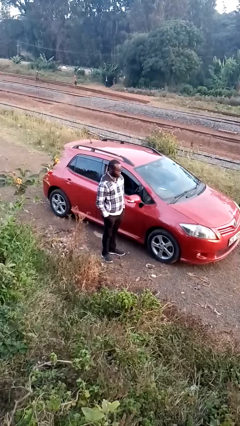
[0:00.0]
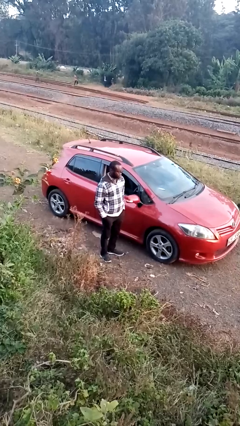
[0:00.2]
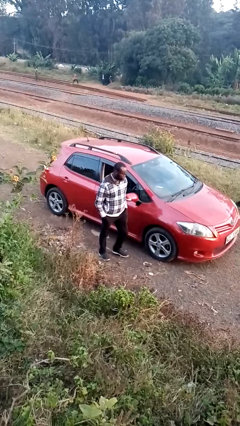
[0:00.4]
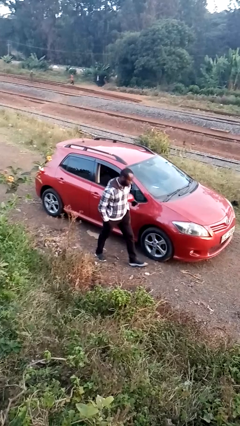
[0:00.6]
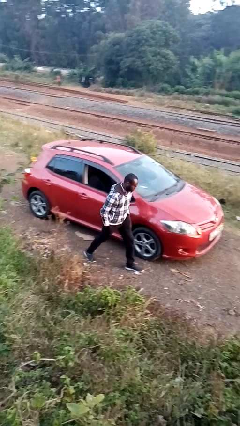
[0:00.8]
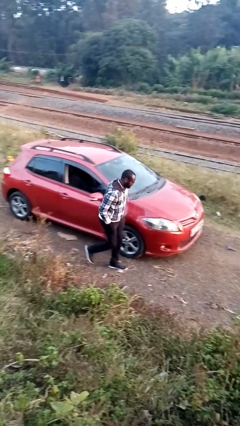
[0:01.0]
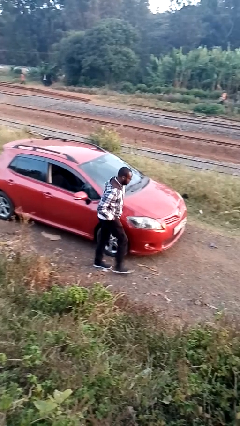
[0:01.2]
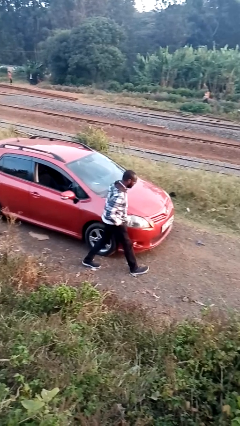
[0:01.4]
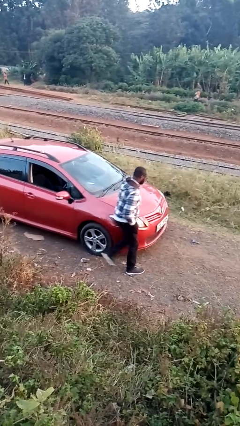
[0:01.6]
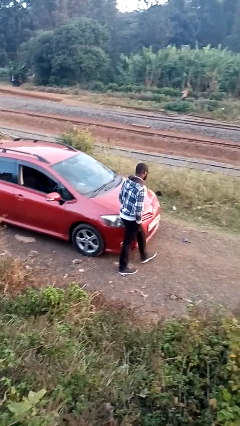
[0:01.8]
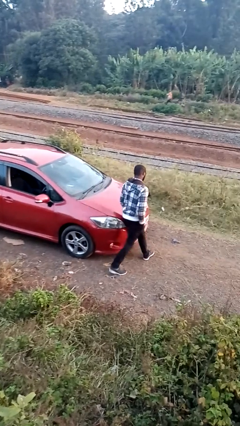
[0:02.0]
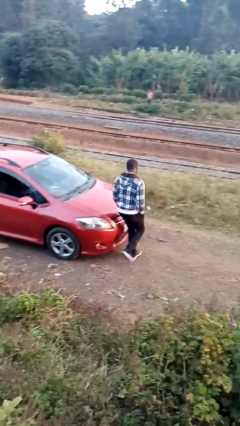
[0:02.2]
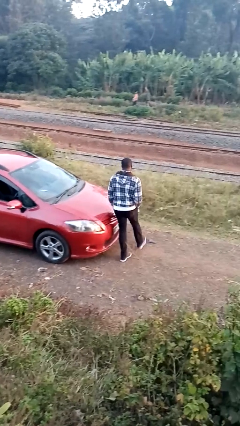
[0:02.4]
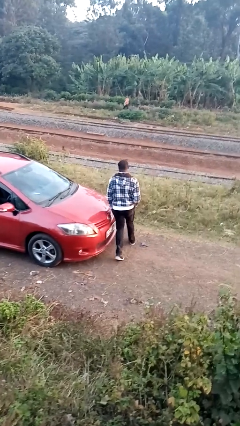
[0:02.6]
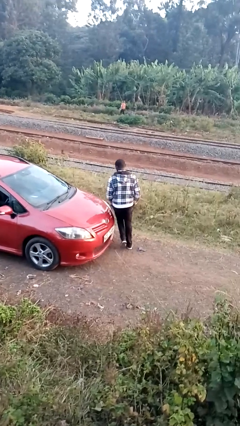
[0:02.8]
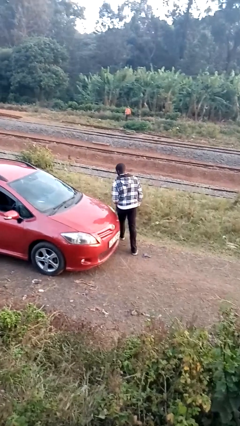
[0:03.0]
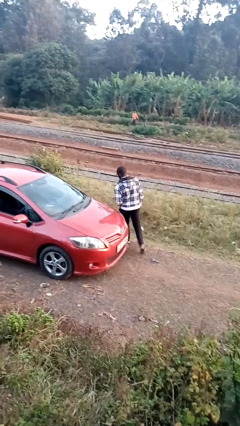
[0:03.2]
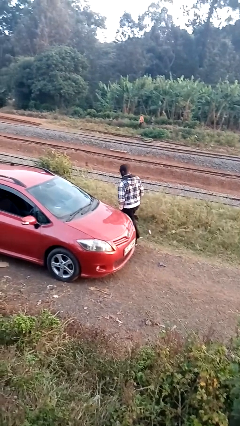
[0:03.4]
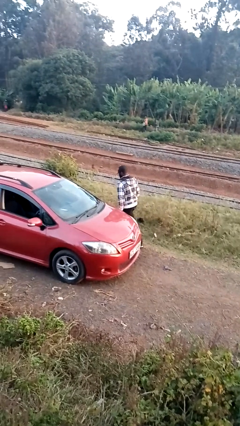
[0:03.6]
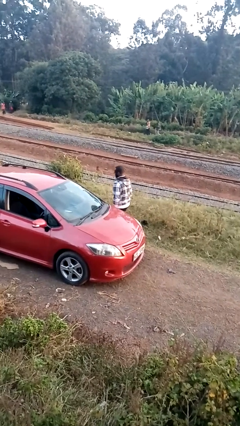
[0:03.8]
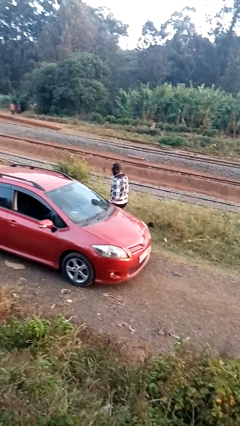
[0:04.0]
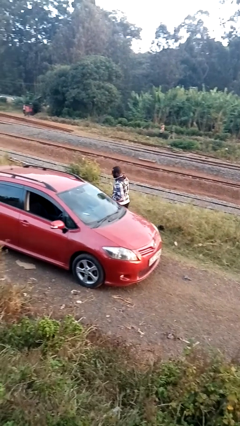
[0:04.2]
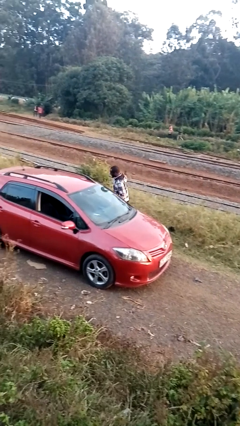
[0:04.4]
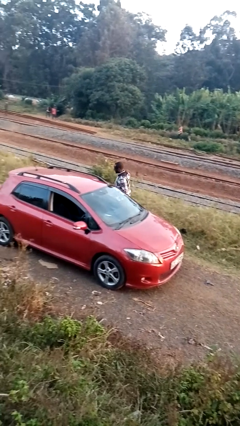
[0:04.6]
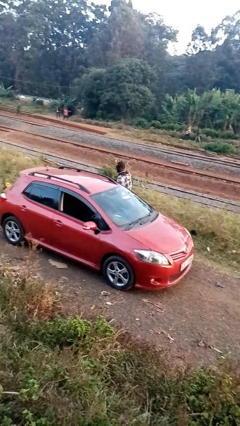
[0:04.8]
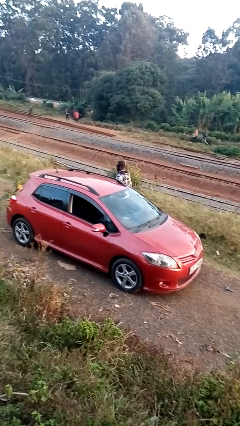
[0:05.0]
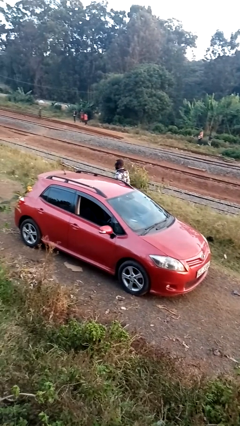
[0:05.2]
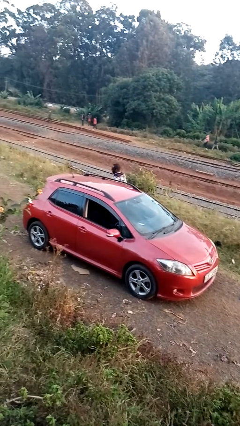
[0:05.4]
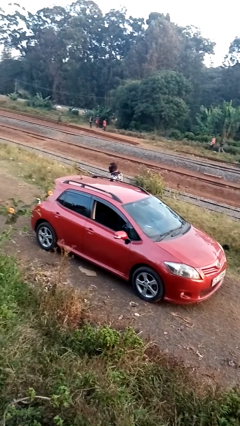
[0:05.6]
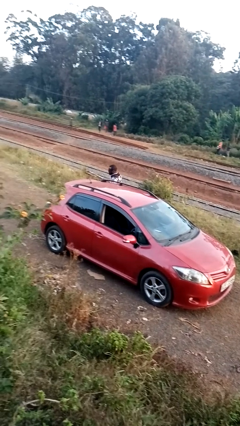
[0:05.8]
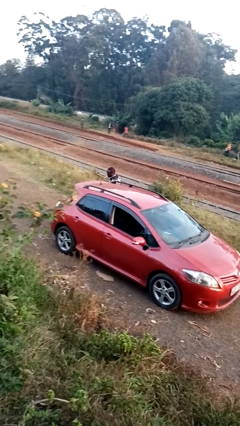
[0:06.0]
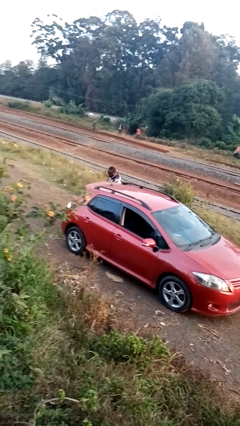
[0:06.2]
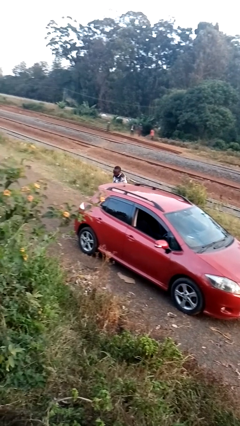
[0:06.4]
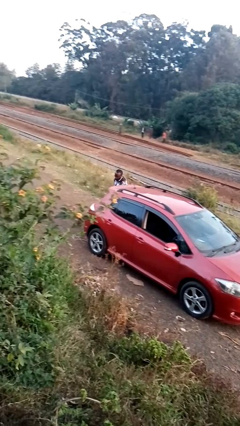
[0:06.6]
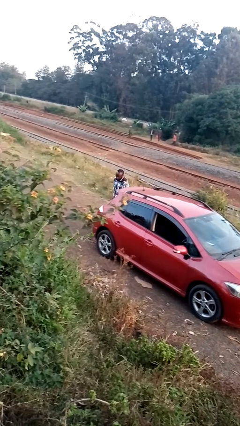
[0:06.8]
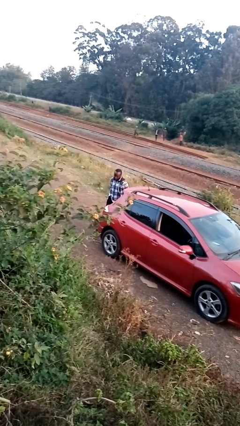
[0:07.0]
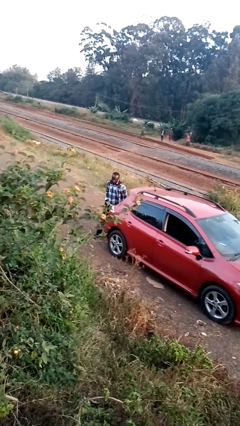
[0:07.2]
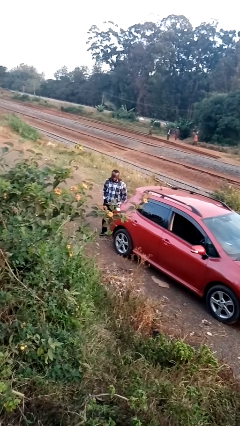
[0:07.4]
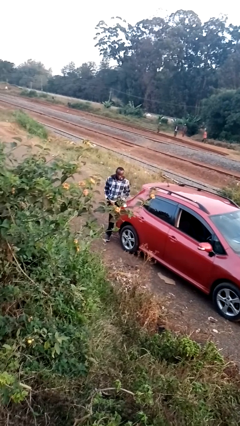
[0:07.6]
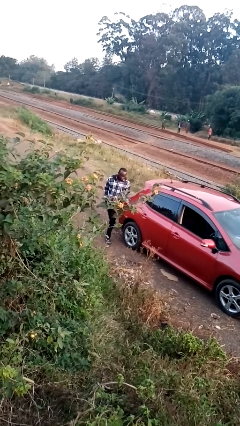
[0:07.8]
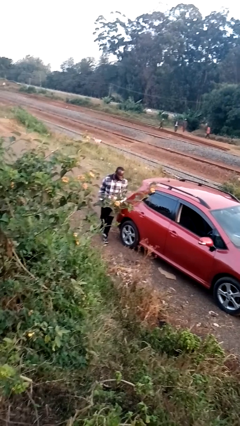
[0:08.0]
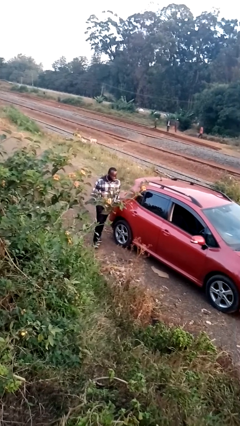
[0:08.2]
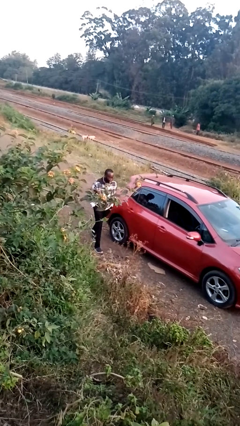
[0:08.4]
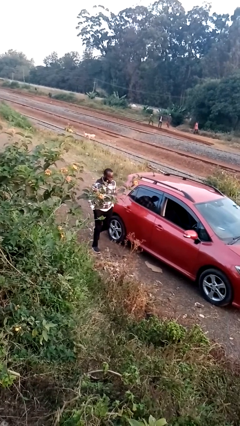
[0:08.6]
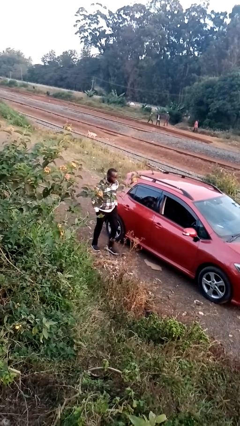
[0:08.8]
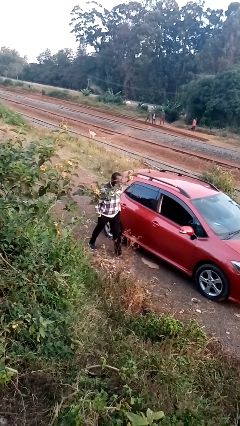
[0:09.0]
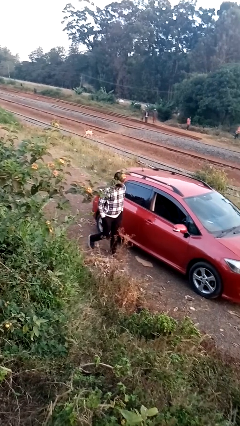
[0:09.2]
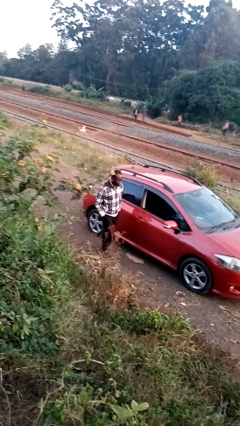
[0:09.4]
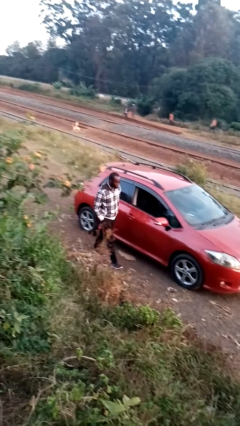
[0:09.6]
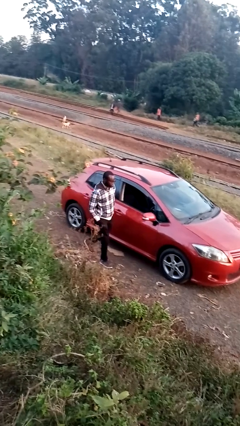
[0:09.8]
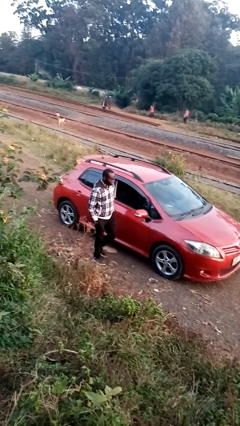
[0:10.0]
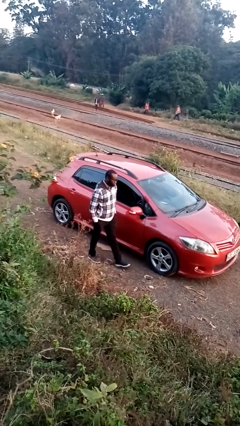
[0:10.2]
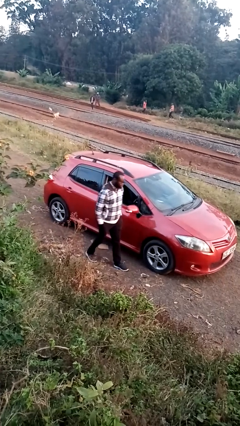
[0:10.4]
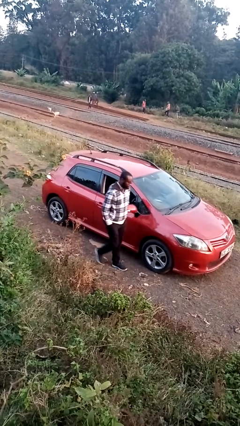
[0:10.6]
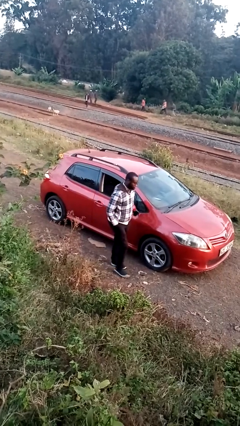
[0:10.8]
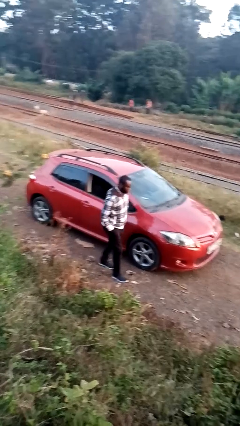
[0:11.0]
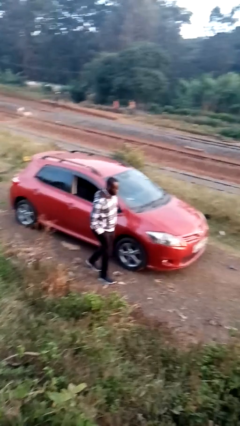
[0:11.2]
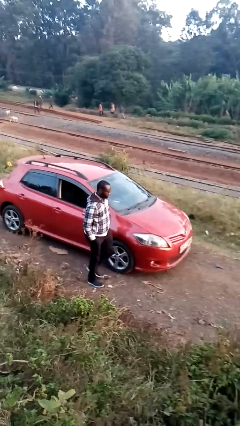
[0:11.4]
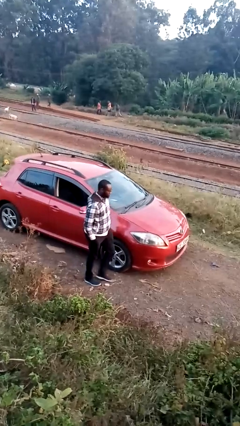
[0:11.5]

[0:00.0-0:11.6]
person walks around car

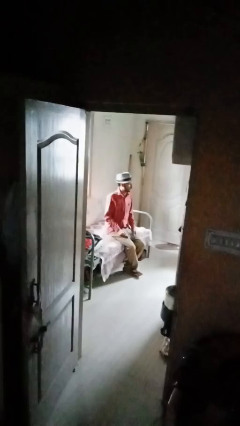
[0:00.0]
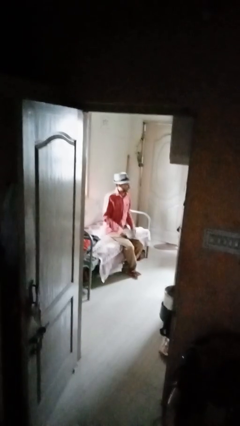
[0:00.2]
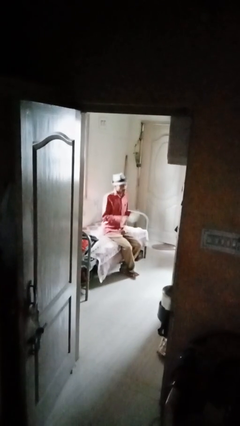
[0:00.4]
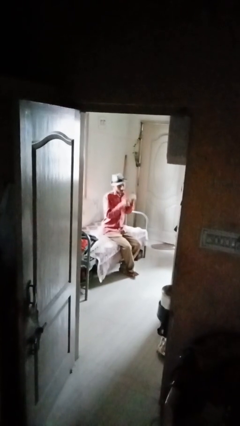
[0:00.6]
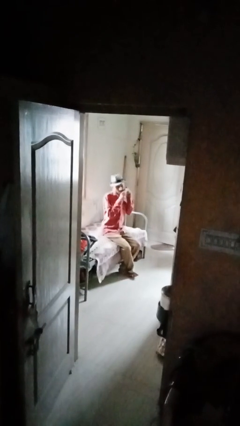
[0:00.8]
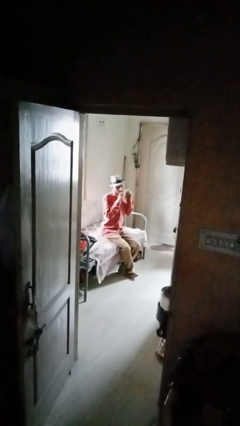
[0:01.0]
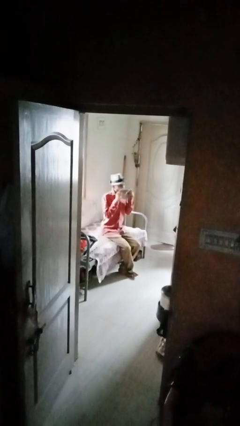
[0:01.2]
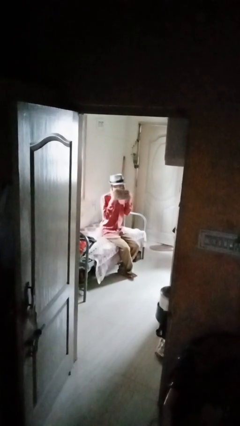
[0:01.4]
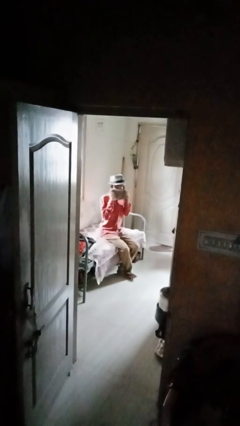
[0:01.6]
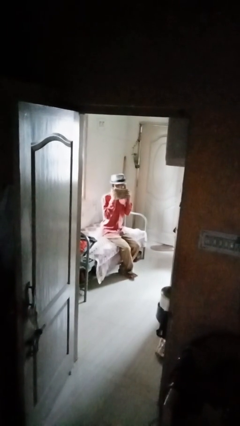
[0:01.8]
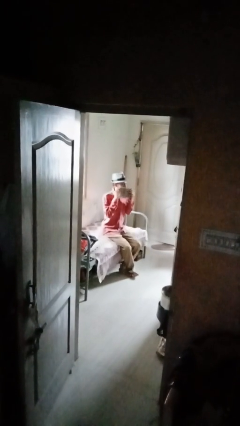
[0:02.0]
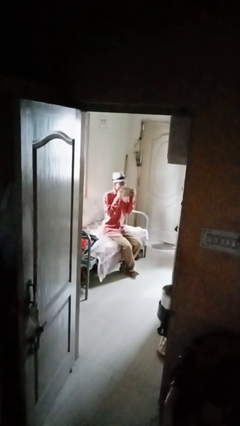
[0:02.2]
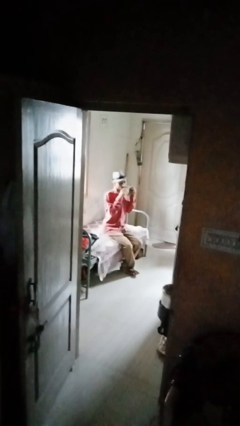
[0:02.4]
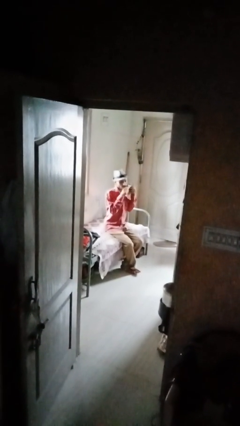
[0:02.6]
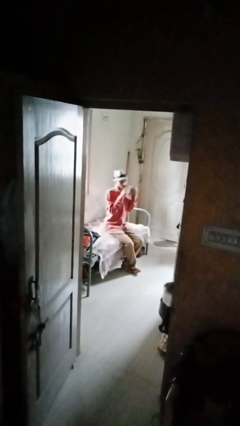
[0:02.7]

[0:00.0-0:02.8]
person wipes mouth with napkin

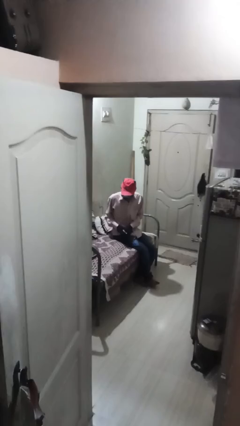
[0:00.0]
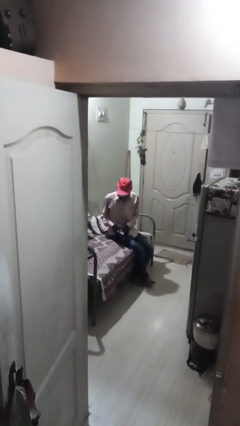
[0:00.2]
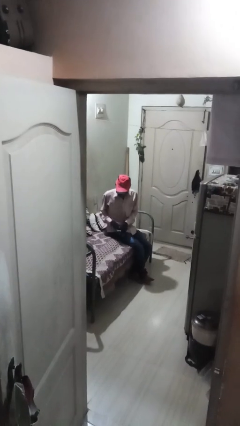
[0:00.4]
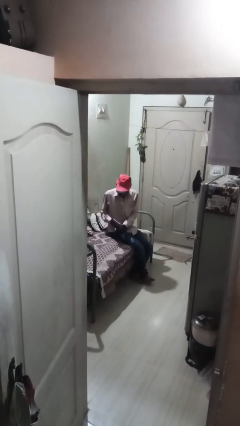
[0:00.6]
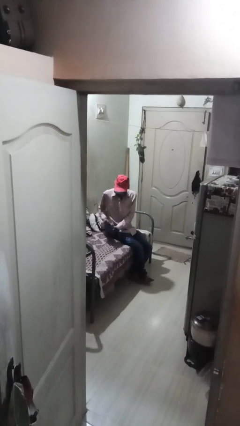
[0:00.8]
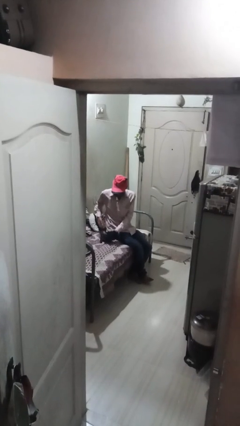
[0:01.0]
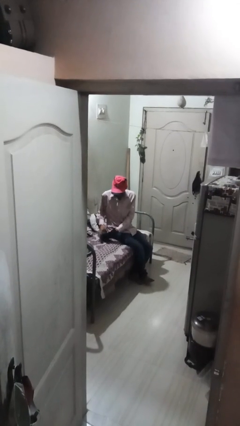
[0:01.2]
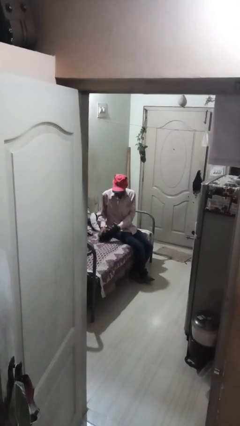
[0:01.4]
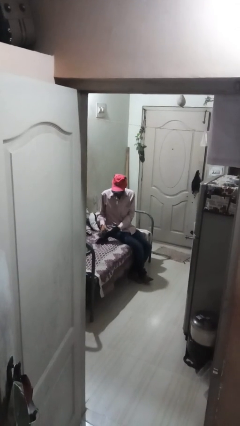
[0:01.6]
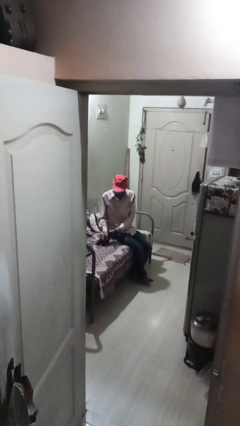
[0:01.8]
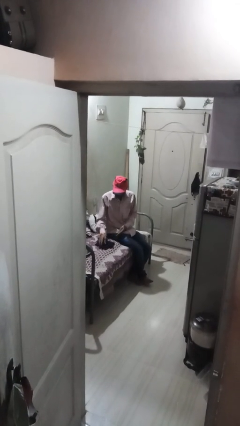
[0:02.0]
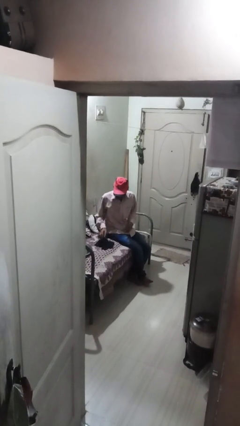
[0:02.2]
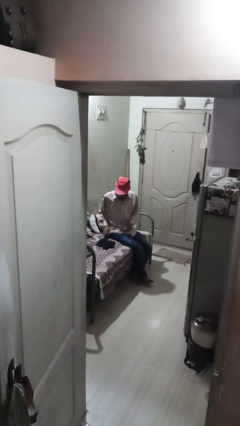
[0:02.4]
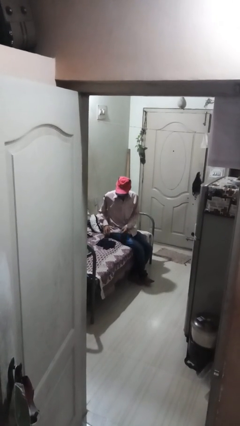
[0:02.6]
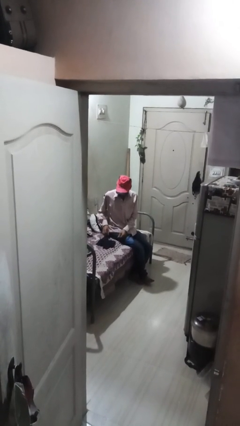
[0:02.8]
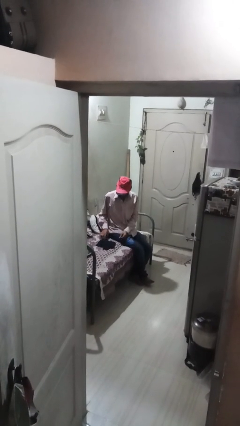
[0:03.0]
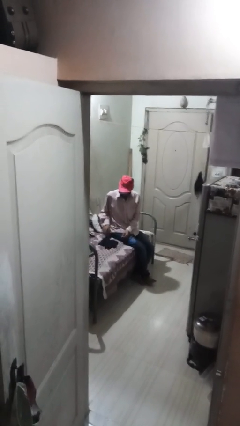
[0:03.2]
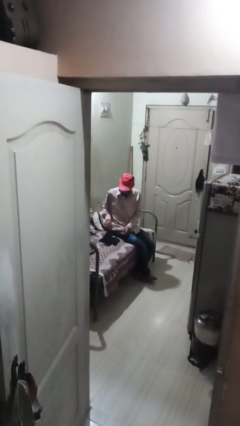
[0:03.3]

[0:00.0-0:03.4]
person takes off gloves

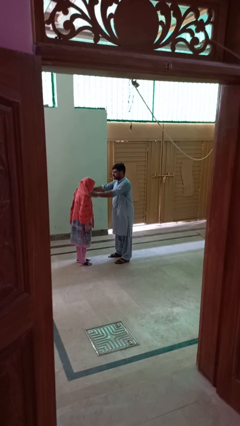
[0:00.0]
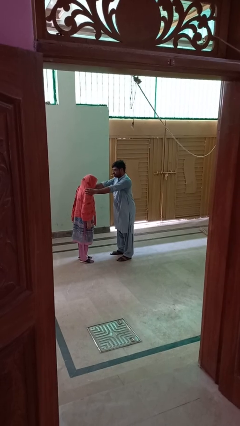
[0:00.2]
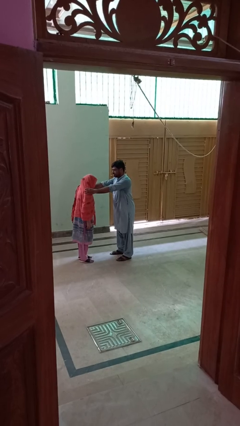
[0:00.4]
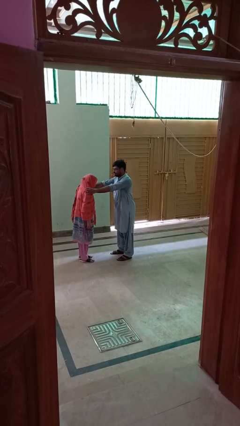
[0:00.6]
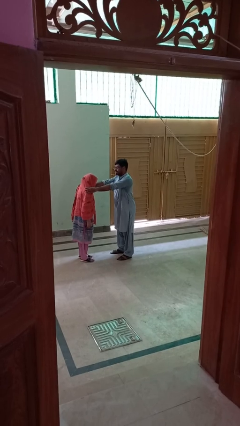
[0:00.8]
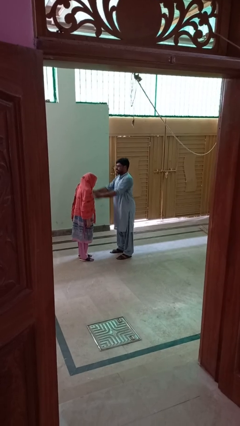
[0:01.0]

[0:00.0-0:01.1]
person pounds shoulders of person
